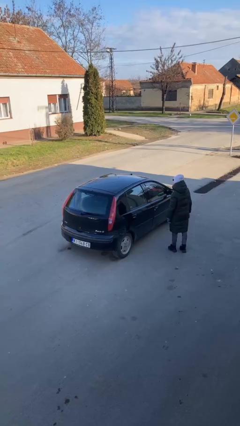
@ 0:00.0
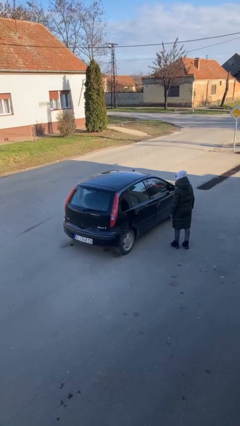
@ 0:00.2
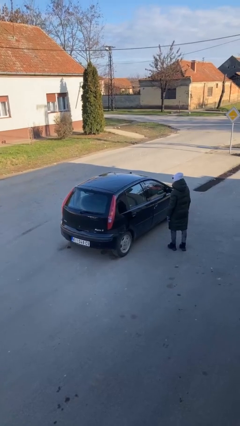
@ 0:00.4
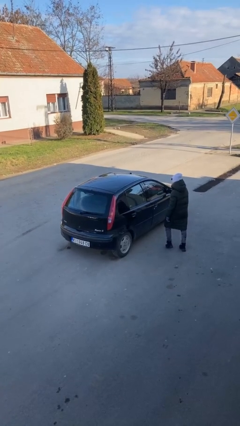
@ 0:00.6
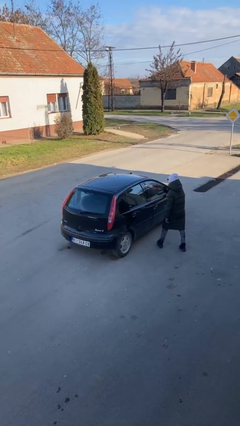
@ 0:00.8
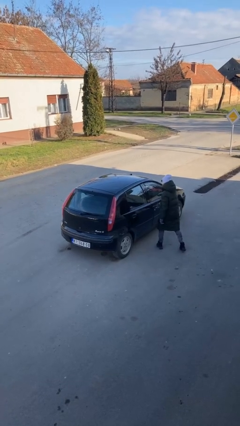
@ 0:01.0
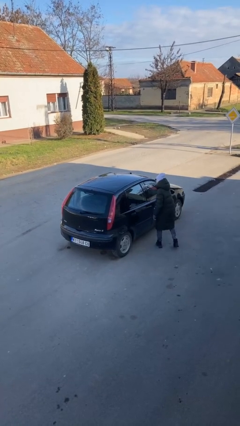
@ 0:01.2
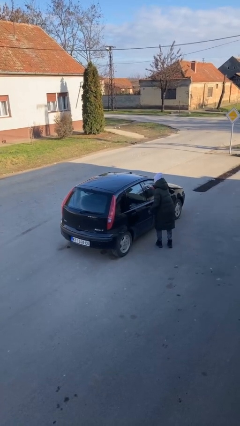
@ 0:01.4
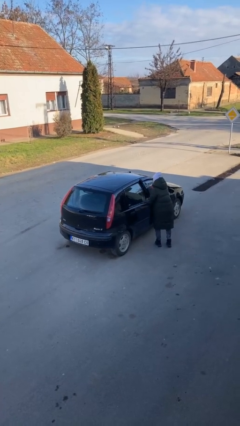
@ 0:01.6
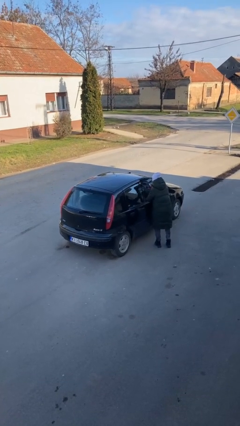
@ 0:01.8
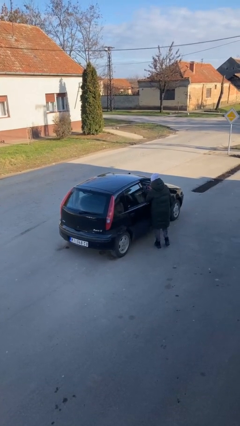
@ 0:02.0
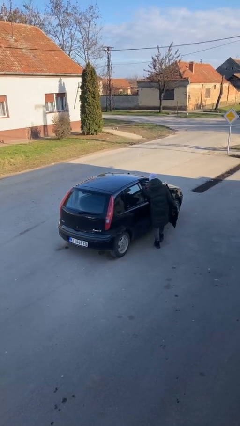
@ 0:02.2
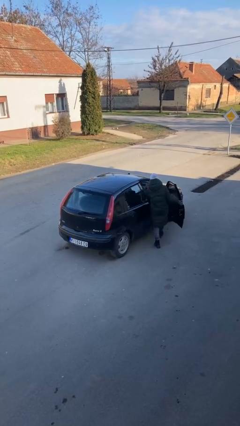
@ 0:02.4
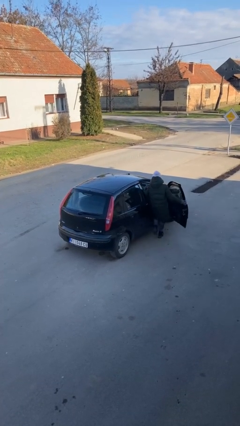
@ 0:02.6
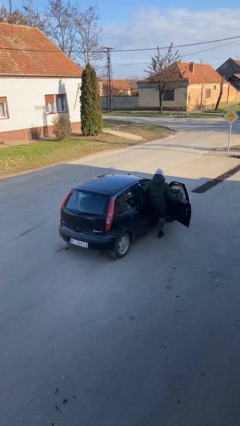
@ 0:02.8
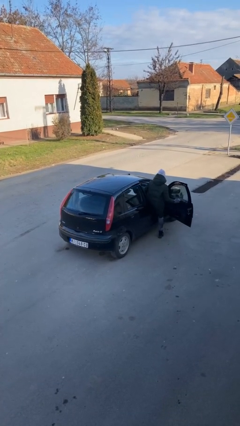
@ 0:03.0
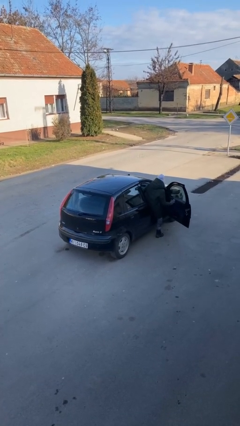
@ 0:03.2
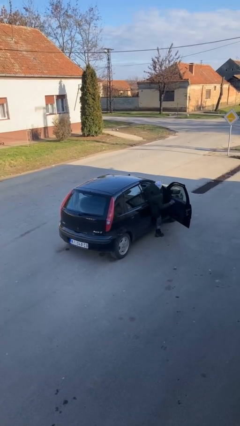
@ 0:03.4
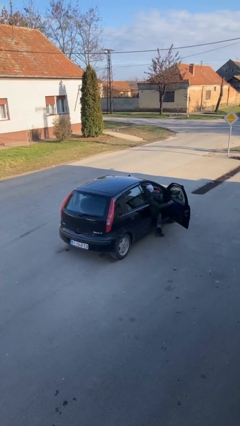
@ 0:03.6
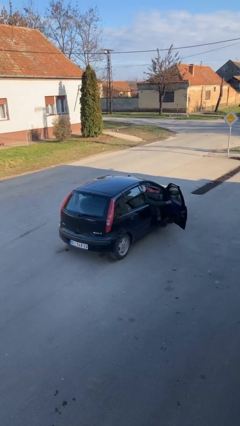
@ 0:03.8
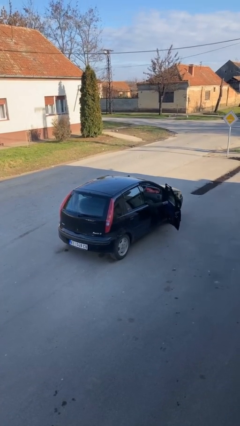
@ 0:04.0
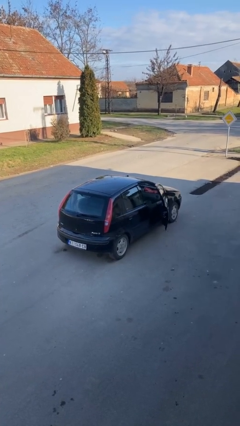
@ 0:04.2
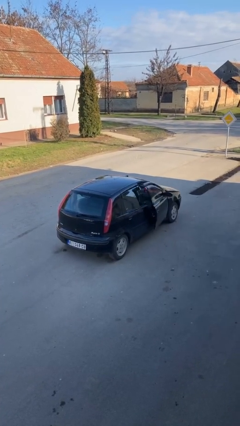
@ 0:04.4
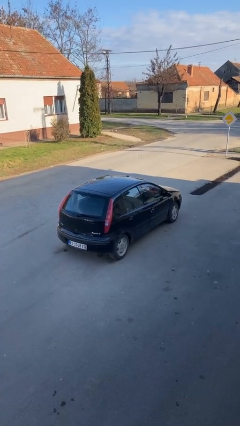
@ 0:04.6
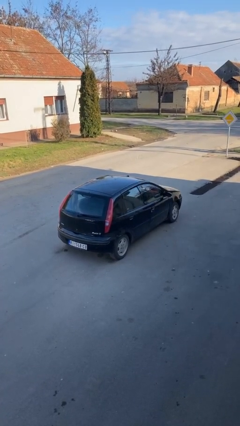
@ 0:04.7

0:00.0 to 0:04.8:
car picks up person

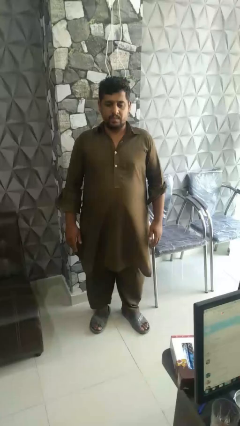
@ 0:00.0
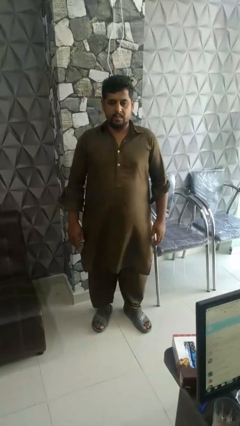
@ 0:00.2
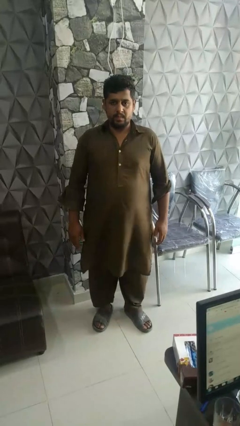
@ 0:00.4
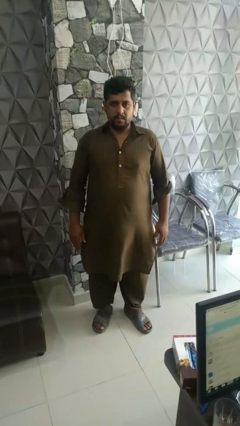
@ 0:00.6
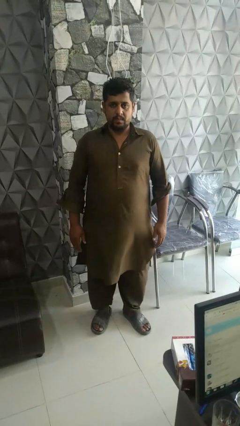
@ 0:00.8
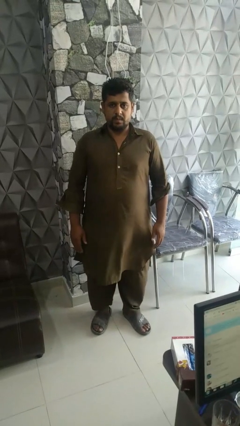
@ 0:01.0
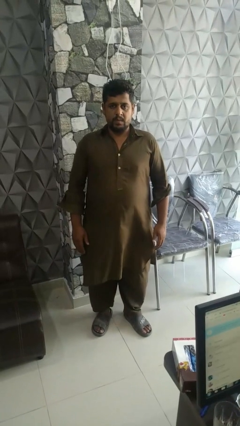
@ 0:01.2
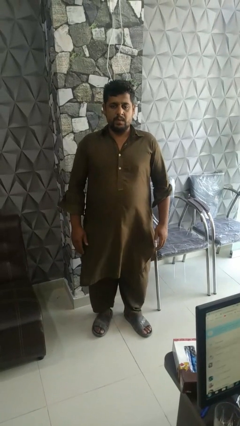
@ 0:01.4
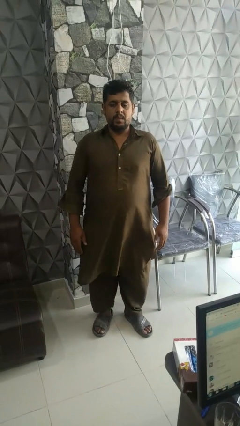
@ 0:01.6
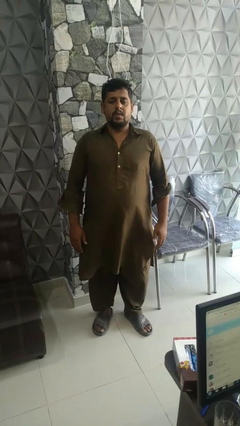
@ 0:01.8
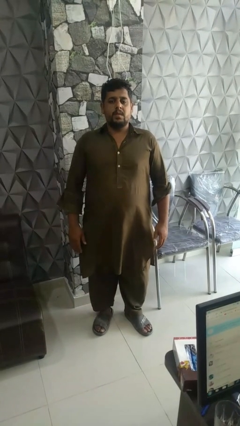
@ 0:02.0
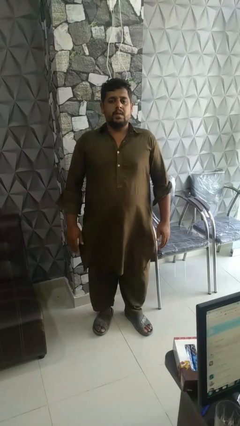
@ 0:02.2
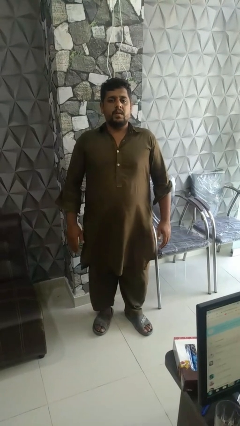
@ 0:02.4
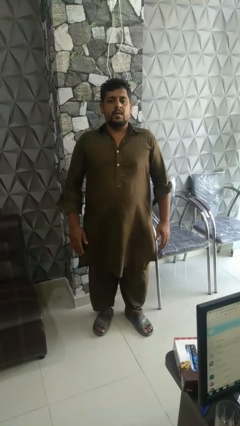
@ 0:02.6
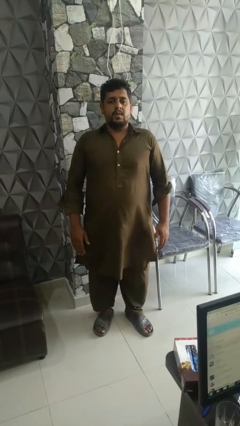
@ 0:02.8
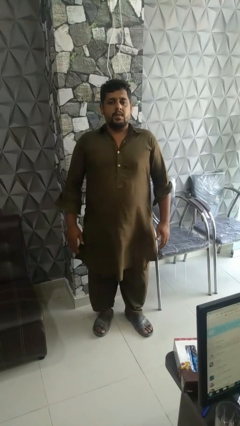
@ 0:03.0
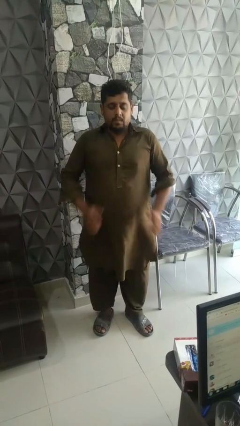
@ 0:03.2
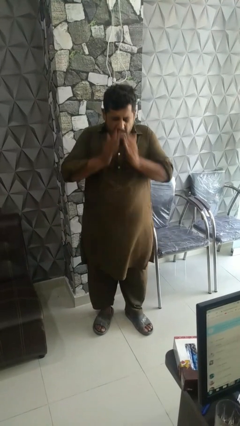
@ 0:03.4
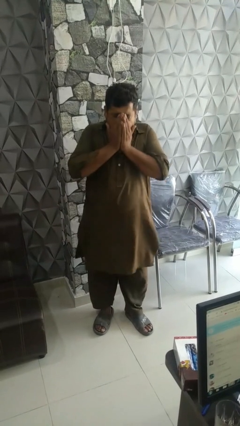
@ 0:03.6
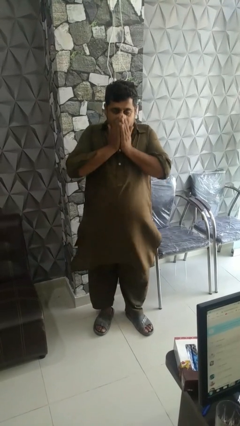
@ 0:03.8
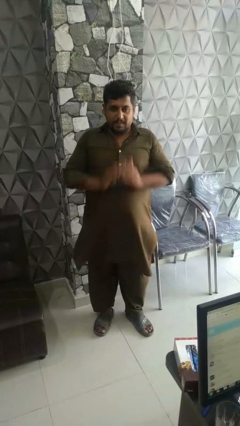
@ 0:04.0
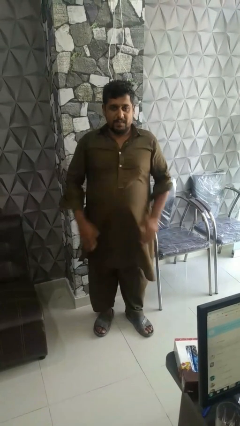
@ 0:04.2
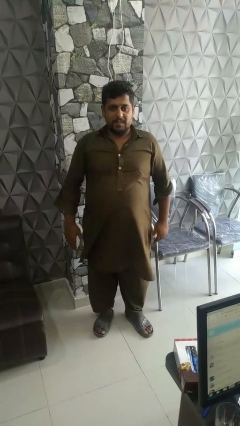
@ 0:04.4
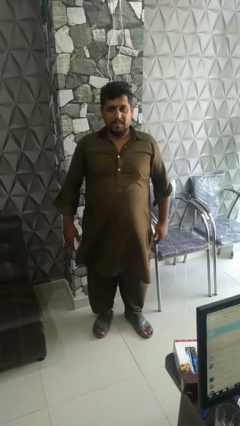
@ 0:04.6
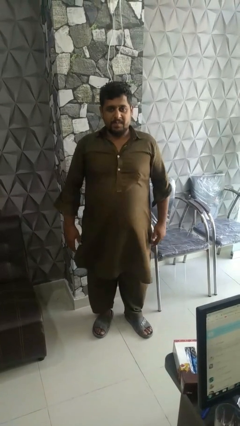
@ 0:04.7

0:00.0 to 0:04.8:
person sneezes into hand

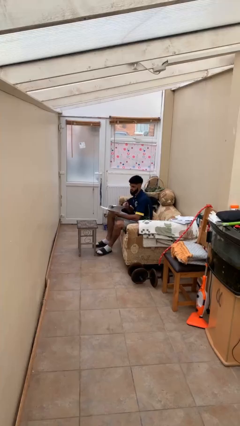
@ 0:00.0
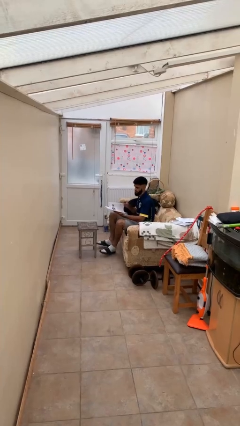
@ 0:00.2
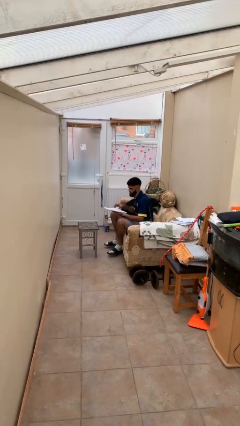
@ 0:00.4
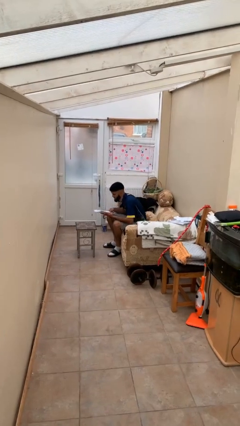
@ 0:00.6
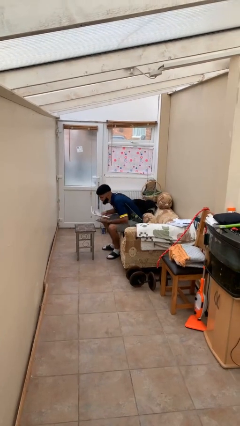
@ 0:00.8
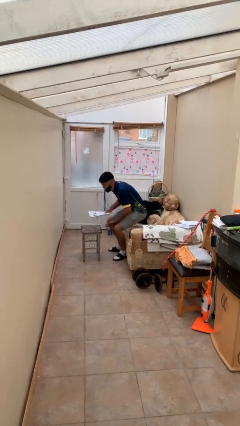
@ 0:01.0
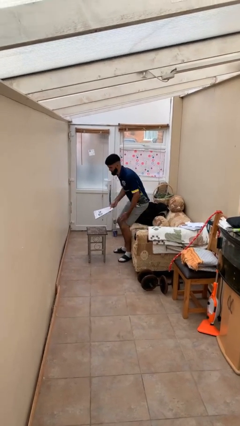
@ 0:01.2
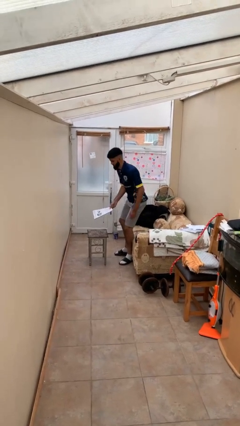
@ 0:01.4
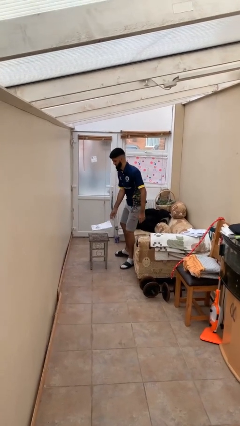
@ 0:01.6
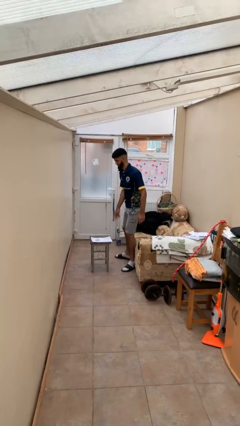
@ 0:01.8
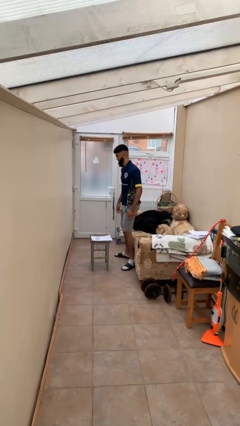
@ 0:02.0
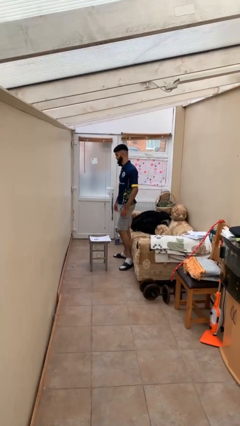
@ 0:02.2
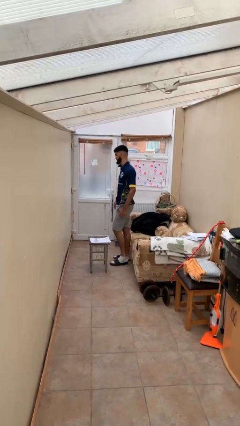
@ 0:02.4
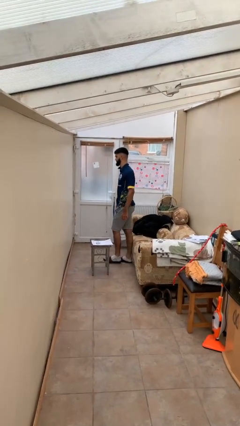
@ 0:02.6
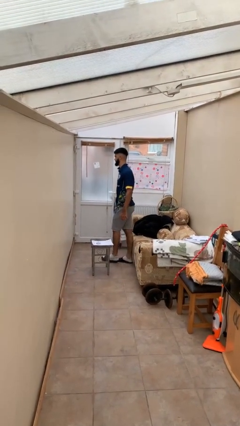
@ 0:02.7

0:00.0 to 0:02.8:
person stands up

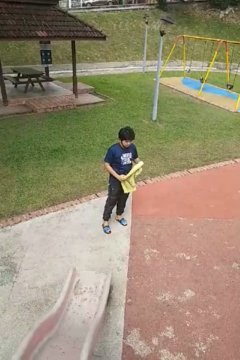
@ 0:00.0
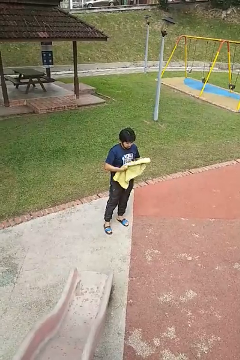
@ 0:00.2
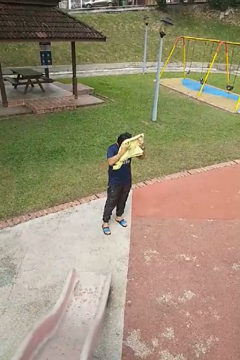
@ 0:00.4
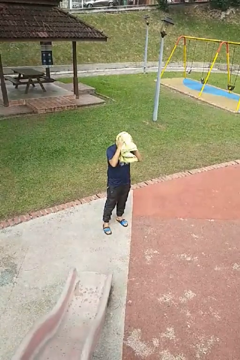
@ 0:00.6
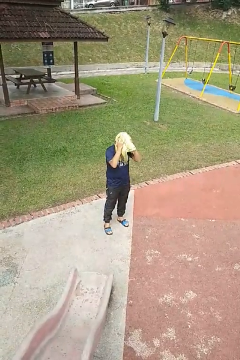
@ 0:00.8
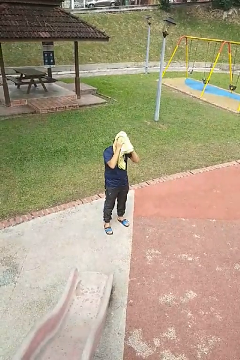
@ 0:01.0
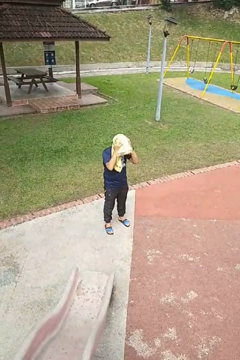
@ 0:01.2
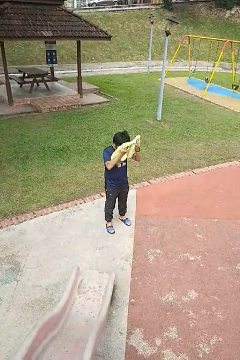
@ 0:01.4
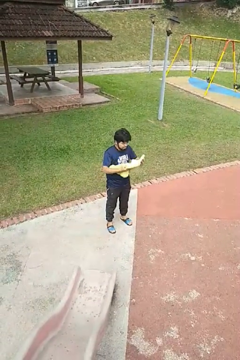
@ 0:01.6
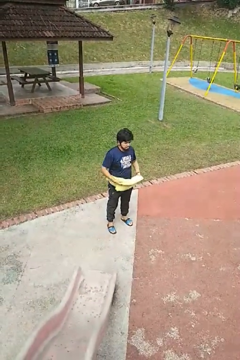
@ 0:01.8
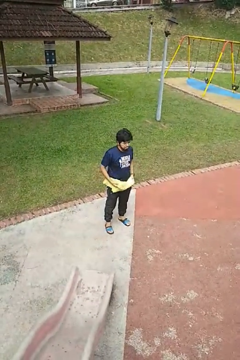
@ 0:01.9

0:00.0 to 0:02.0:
person dries hair with towel

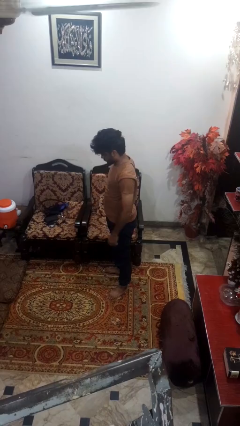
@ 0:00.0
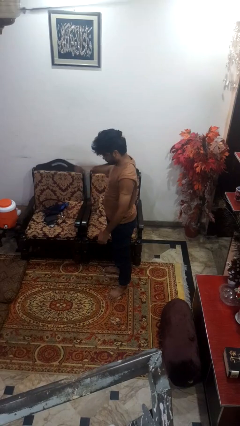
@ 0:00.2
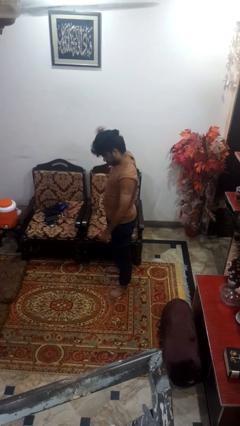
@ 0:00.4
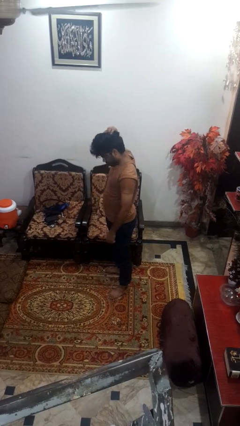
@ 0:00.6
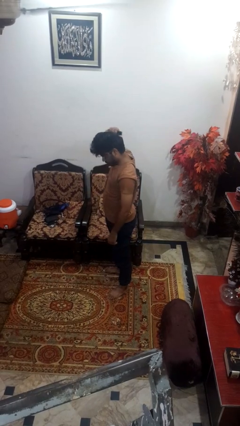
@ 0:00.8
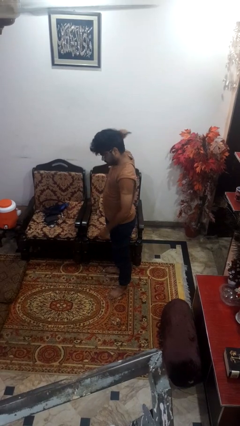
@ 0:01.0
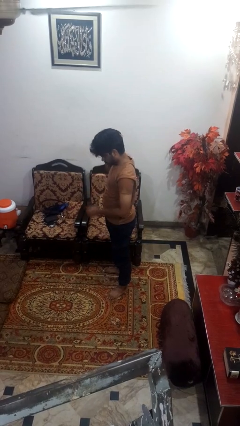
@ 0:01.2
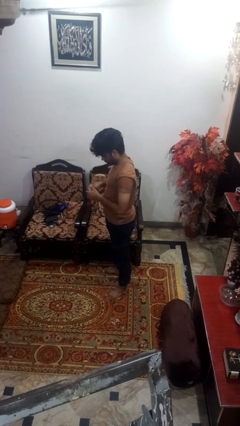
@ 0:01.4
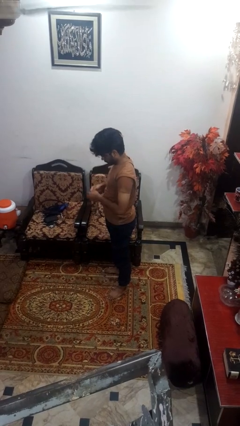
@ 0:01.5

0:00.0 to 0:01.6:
person takes off hairtie

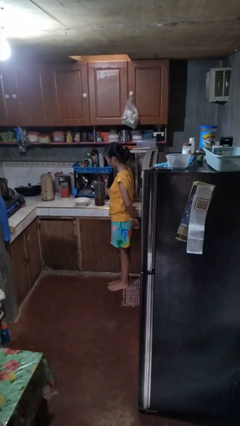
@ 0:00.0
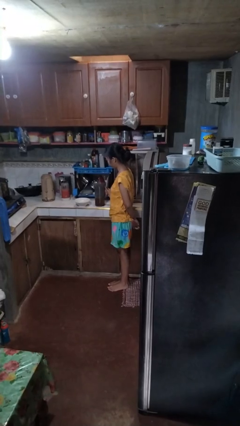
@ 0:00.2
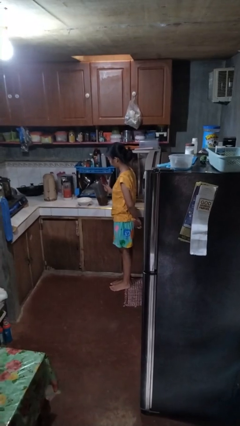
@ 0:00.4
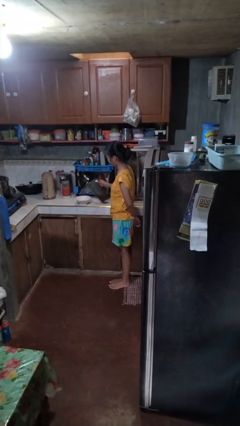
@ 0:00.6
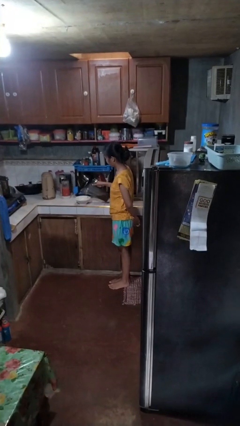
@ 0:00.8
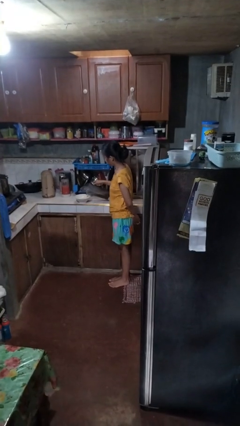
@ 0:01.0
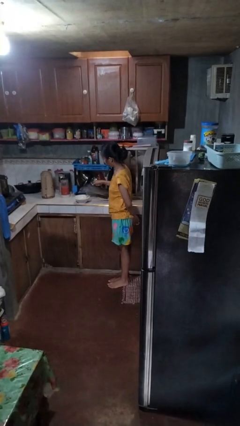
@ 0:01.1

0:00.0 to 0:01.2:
person pours into bowl

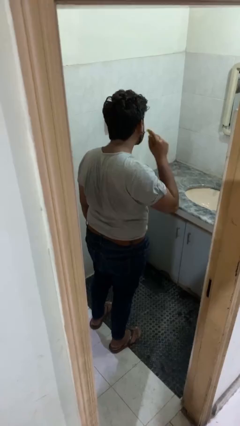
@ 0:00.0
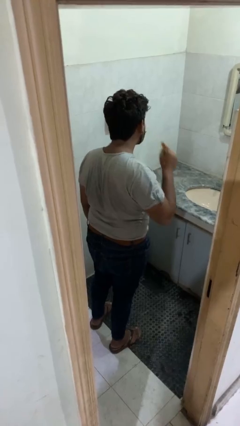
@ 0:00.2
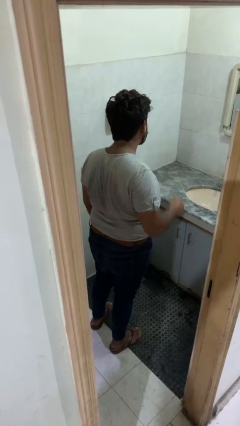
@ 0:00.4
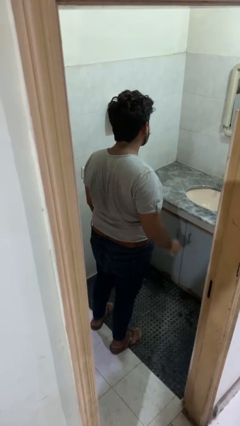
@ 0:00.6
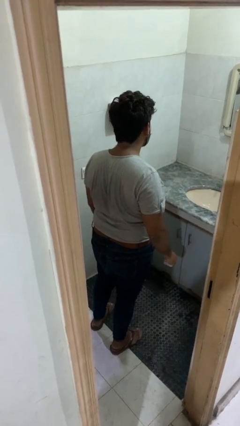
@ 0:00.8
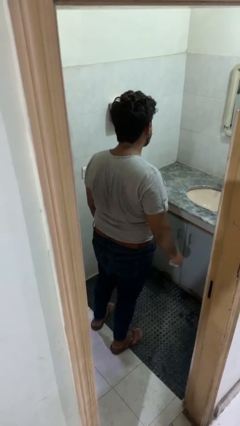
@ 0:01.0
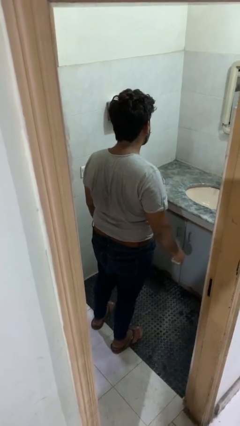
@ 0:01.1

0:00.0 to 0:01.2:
person applies shaving cream
